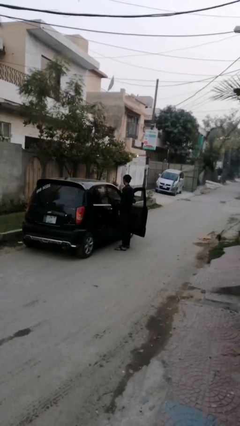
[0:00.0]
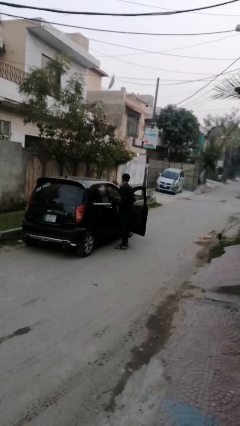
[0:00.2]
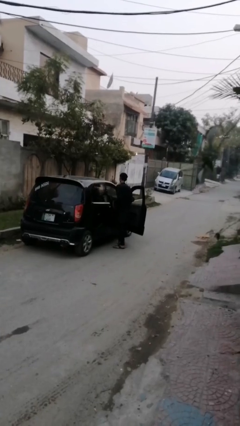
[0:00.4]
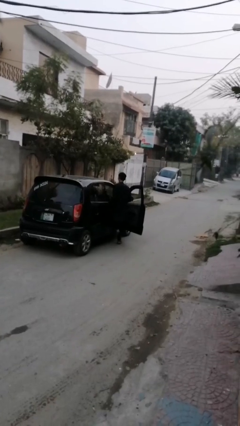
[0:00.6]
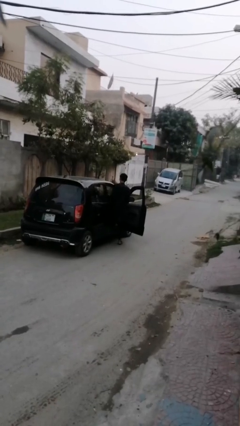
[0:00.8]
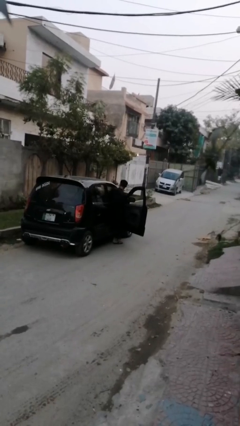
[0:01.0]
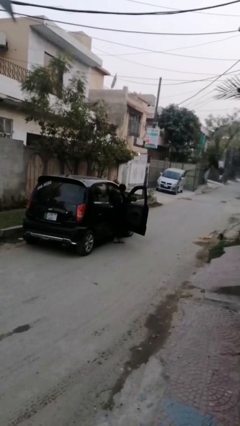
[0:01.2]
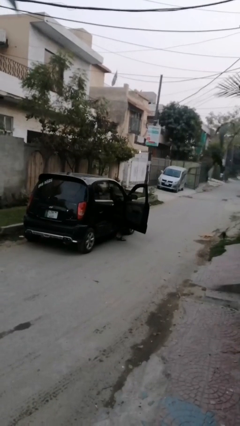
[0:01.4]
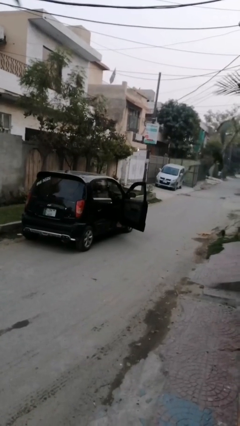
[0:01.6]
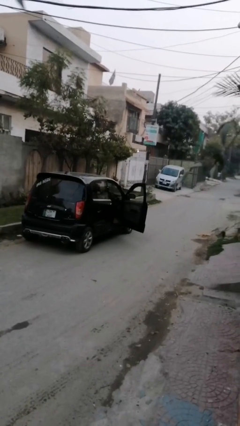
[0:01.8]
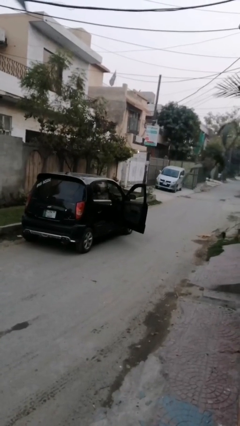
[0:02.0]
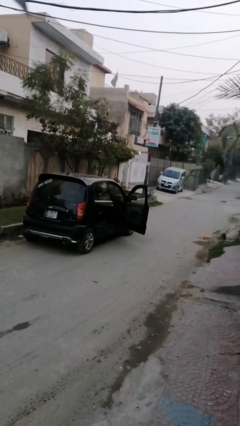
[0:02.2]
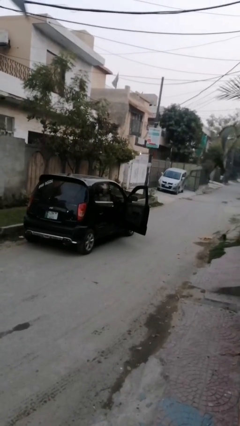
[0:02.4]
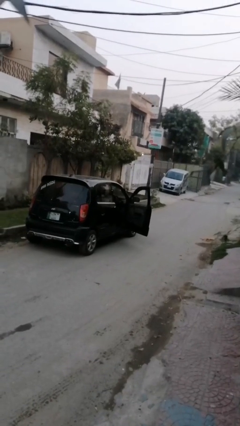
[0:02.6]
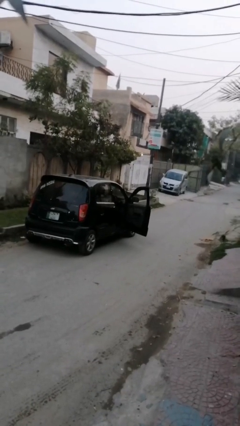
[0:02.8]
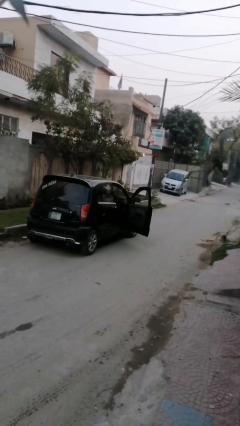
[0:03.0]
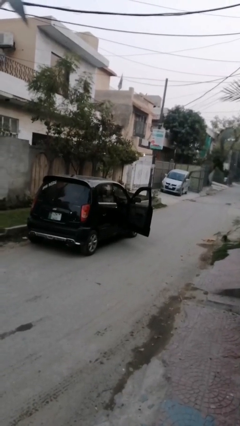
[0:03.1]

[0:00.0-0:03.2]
person enters car

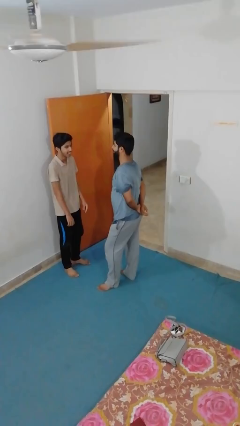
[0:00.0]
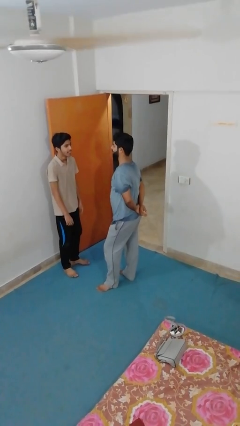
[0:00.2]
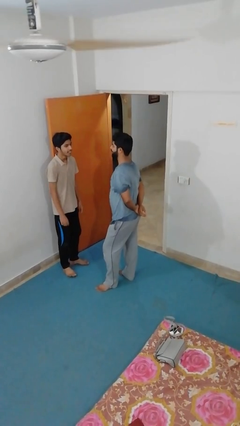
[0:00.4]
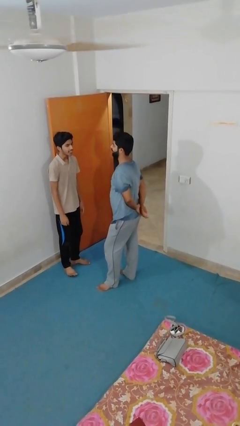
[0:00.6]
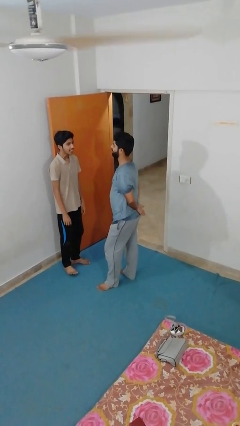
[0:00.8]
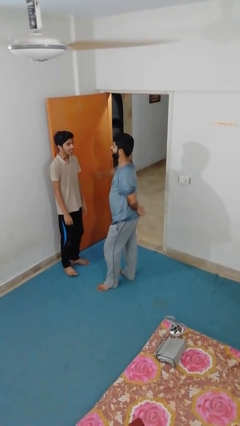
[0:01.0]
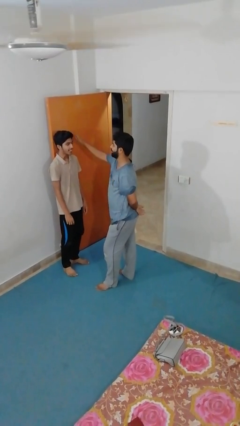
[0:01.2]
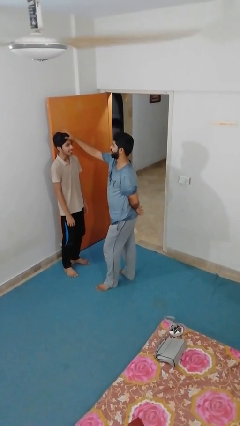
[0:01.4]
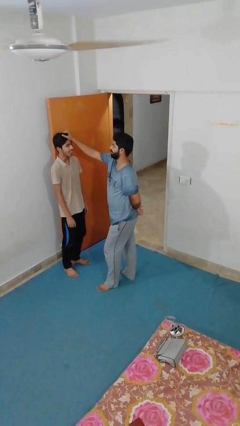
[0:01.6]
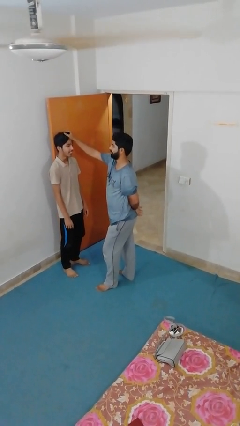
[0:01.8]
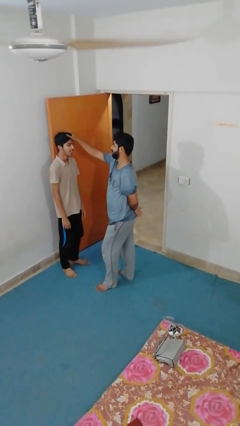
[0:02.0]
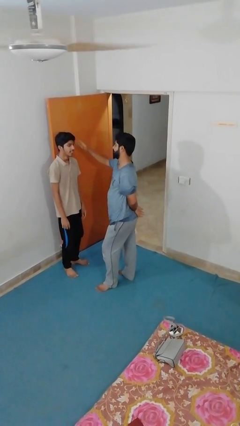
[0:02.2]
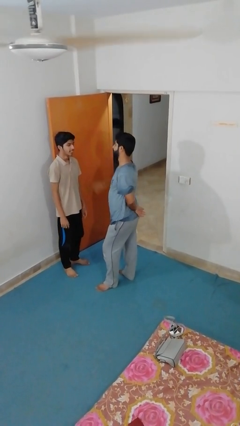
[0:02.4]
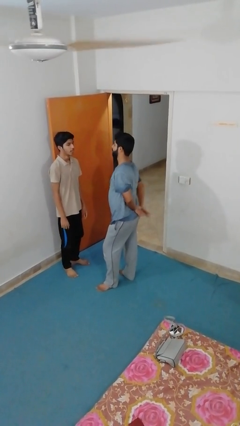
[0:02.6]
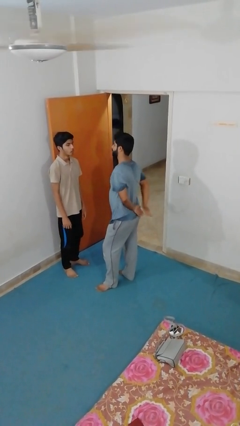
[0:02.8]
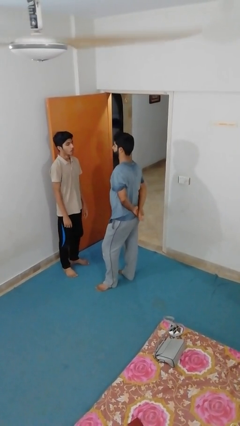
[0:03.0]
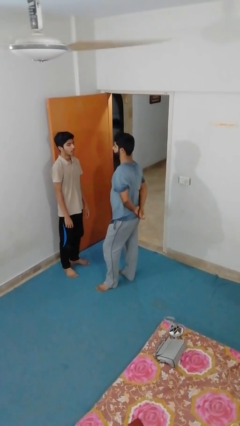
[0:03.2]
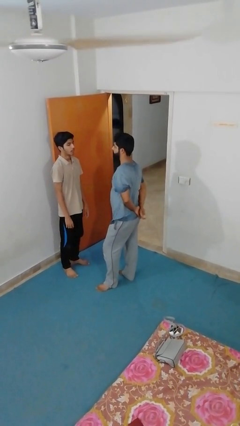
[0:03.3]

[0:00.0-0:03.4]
person grabs person by hair

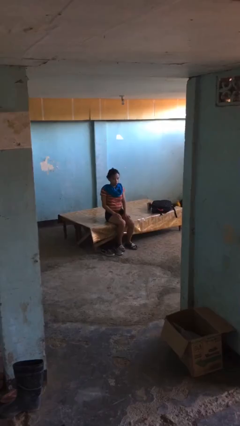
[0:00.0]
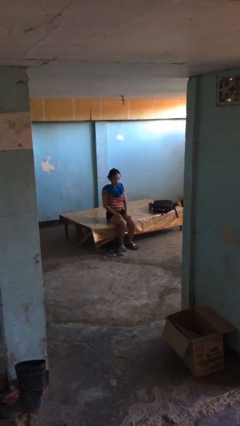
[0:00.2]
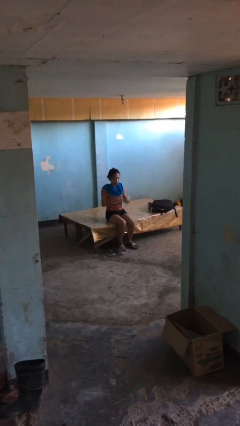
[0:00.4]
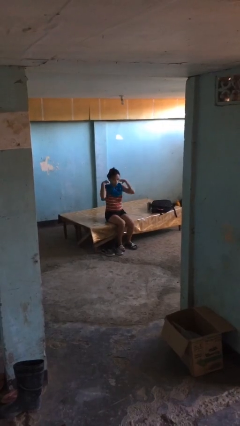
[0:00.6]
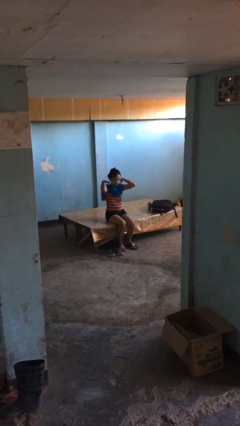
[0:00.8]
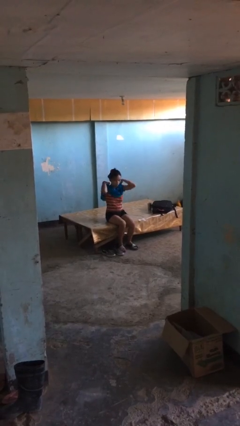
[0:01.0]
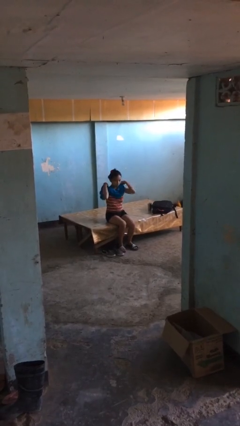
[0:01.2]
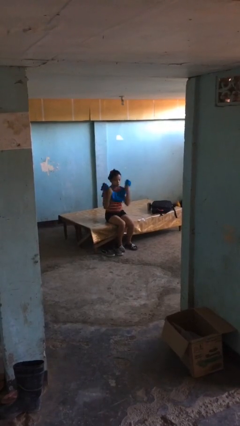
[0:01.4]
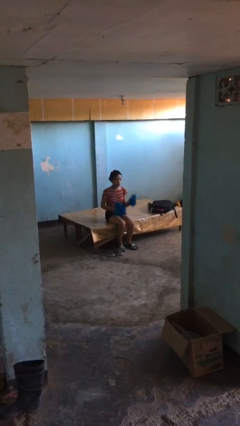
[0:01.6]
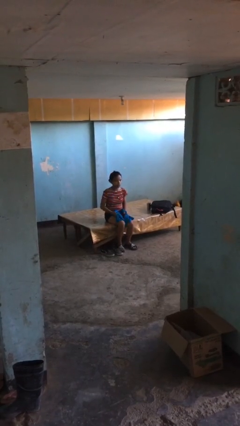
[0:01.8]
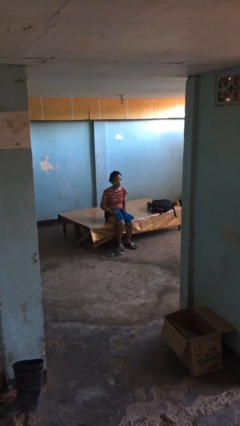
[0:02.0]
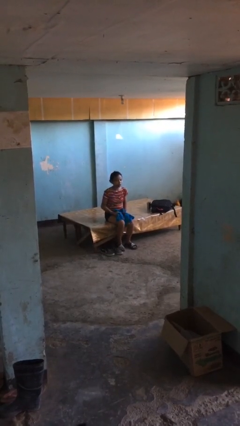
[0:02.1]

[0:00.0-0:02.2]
person takes off scarf

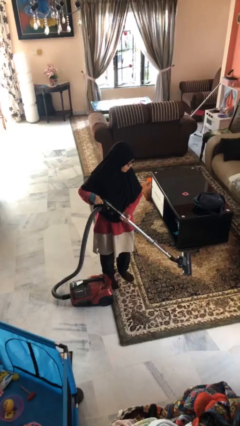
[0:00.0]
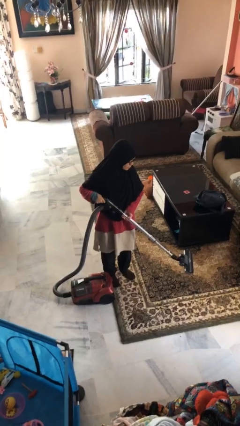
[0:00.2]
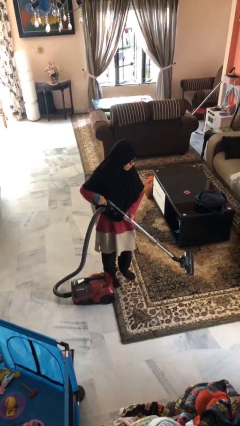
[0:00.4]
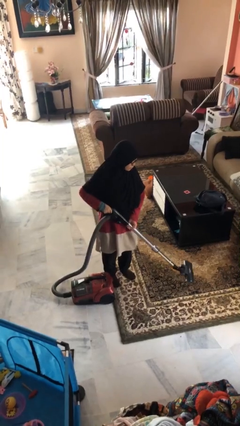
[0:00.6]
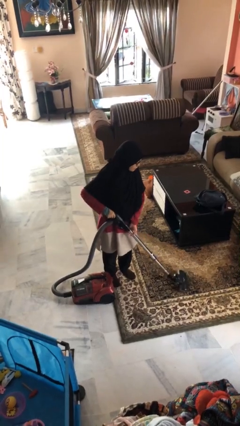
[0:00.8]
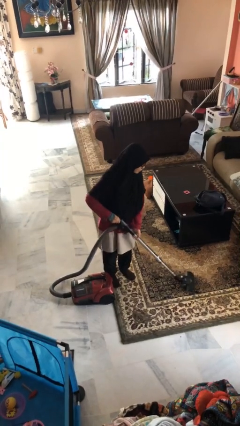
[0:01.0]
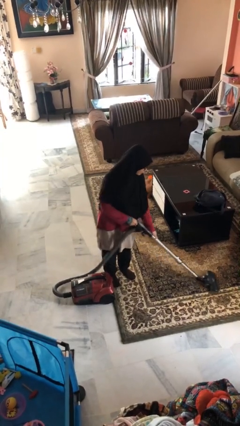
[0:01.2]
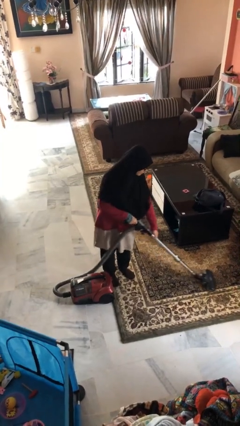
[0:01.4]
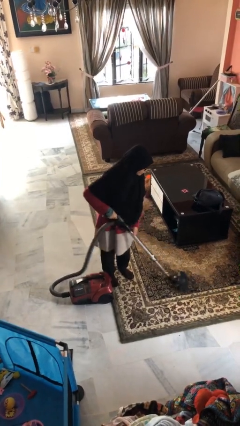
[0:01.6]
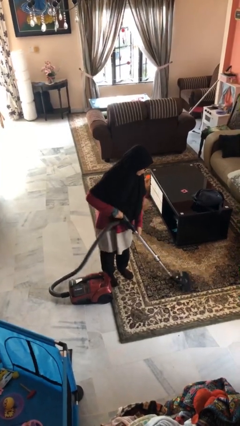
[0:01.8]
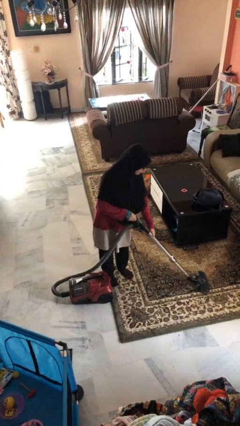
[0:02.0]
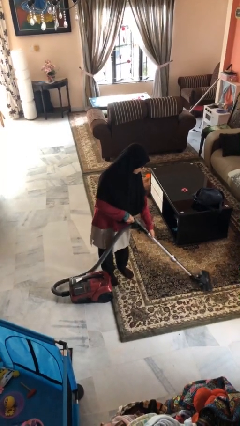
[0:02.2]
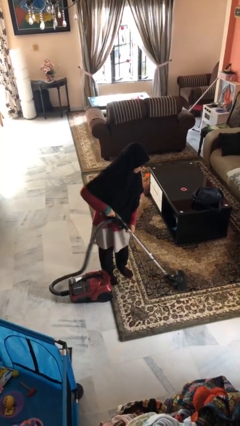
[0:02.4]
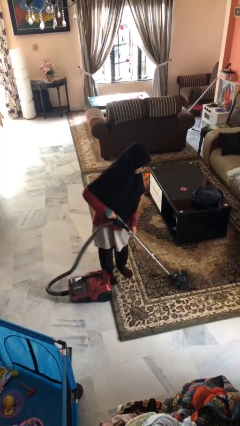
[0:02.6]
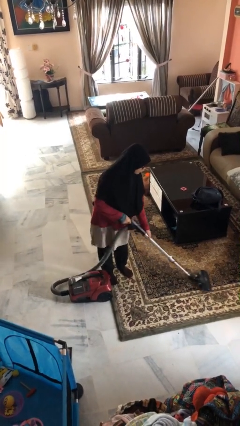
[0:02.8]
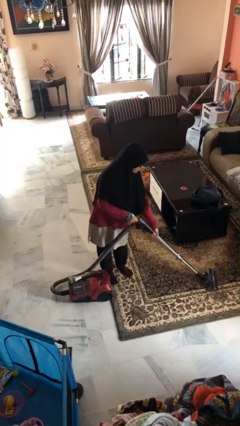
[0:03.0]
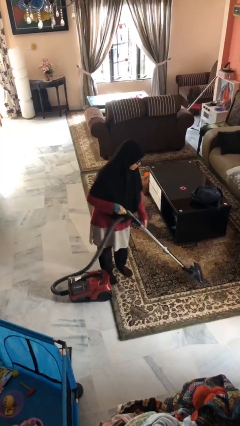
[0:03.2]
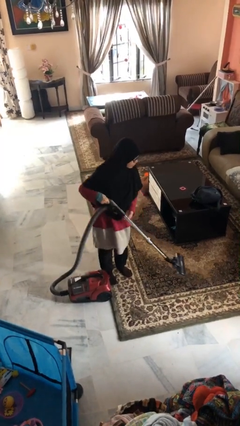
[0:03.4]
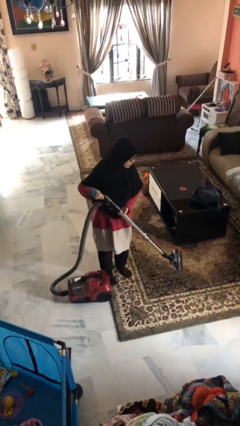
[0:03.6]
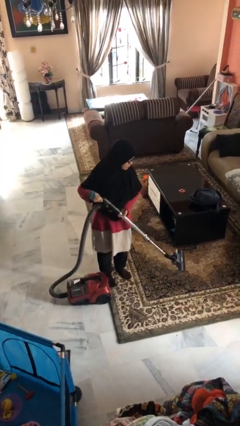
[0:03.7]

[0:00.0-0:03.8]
person vacuums carpet

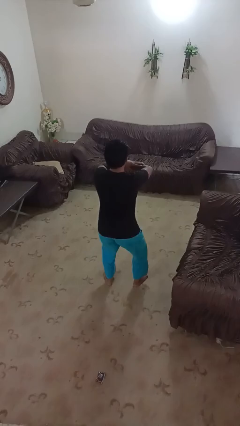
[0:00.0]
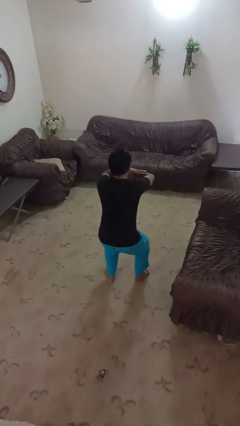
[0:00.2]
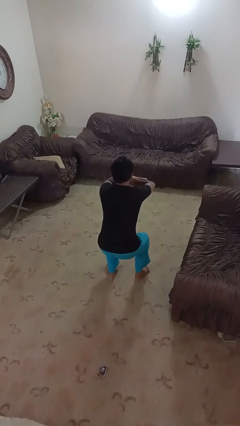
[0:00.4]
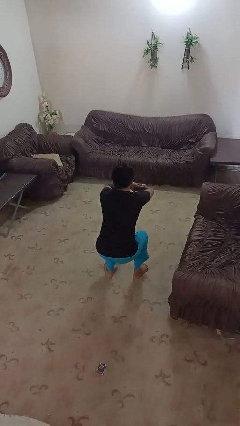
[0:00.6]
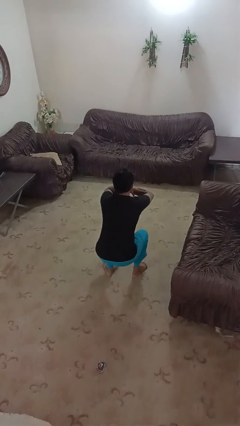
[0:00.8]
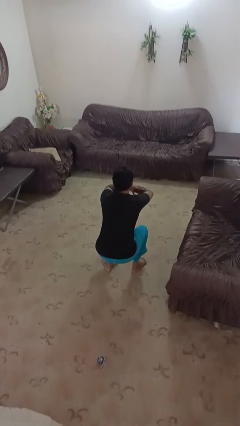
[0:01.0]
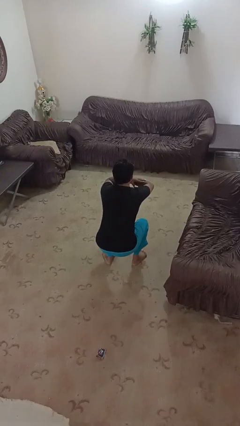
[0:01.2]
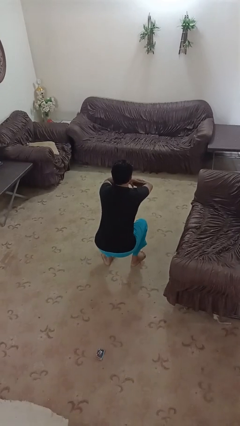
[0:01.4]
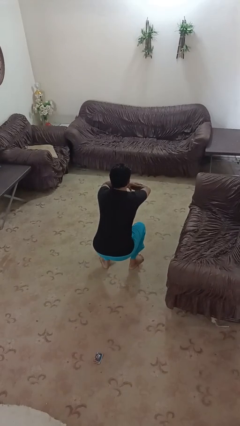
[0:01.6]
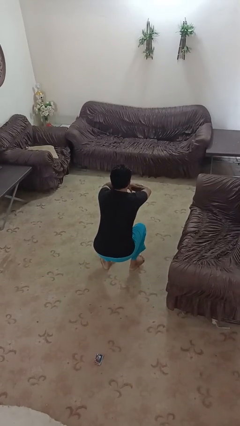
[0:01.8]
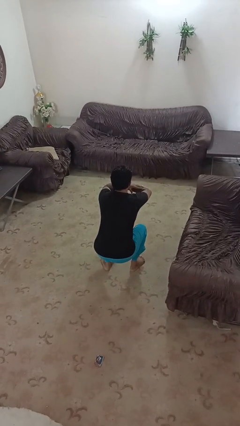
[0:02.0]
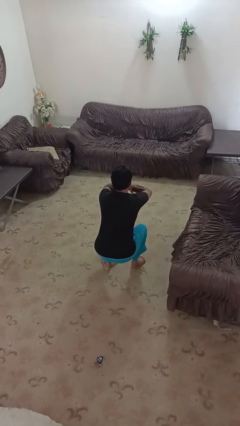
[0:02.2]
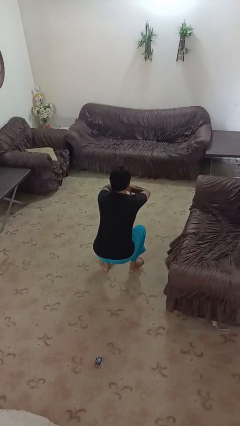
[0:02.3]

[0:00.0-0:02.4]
person squats

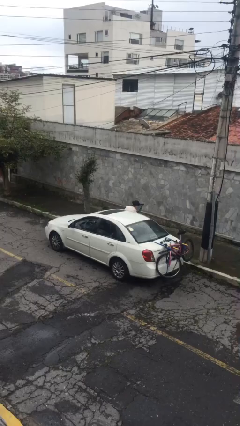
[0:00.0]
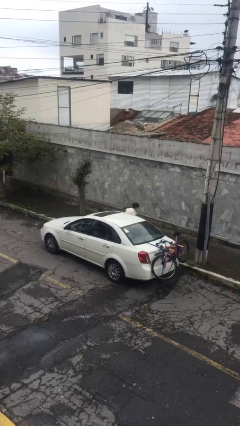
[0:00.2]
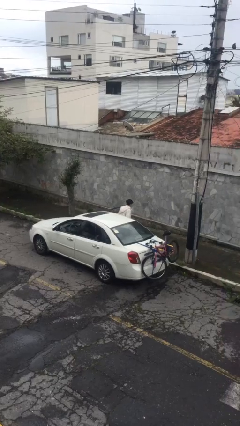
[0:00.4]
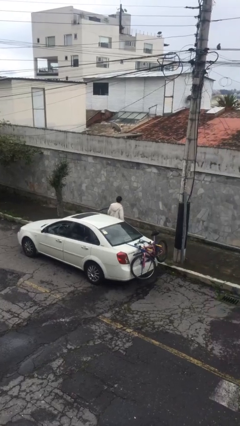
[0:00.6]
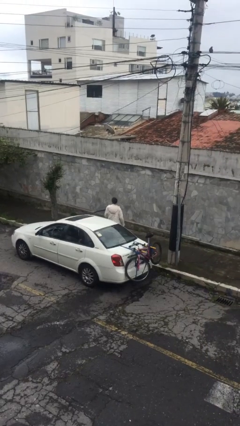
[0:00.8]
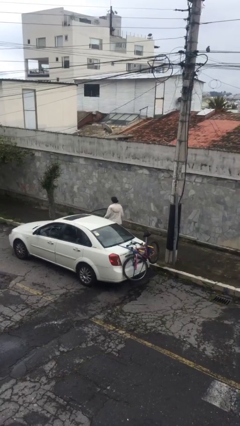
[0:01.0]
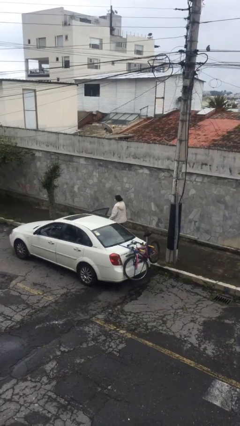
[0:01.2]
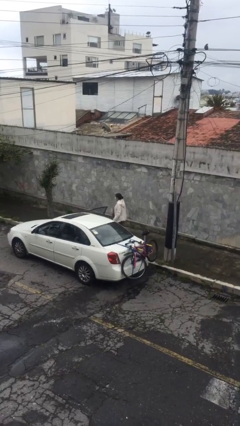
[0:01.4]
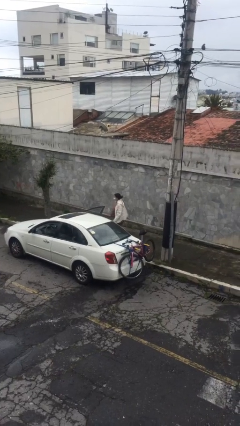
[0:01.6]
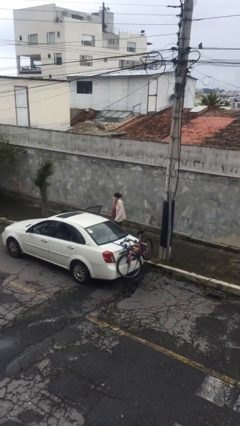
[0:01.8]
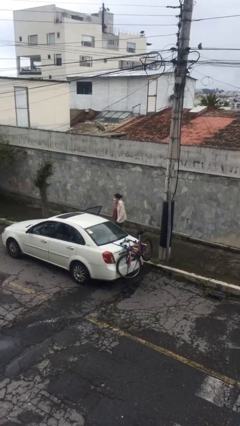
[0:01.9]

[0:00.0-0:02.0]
person exits car

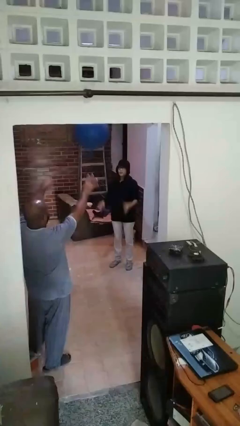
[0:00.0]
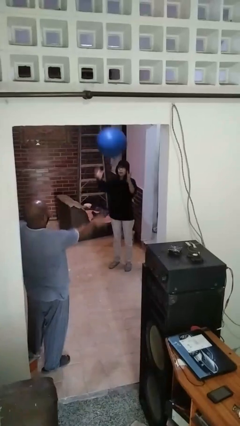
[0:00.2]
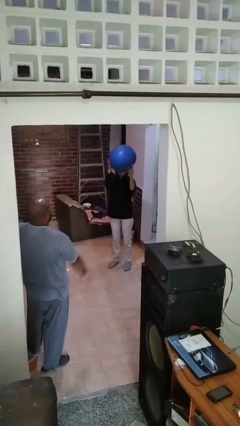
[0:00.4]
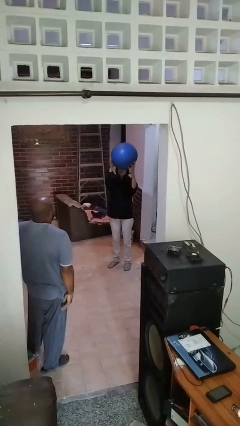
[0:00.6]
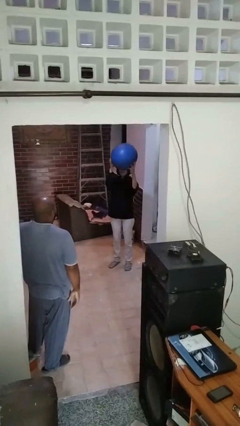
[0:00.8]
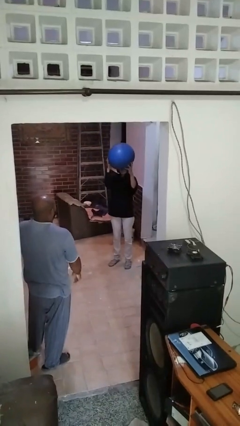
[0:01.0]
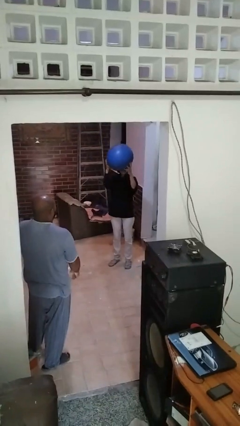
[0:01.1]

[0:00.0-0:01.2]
person catches object from person
